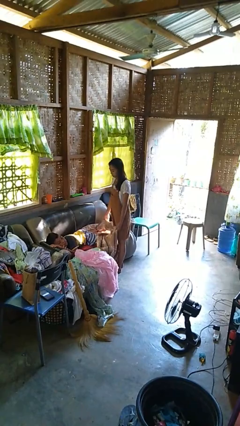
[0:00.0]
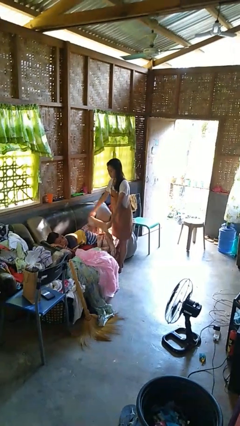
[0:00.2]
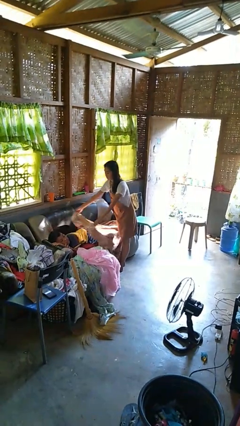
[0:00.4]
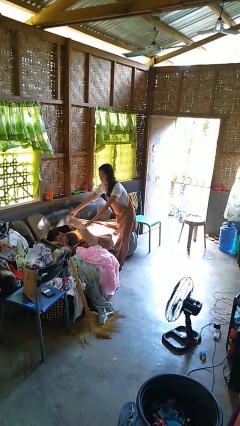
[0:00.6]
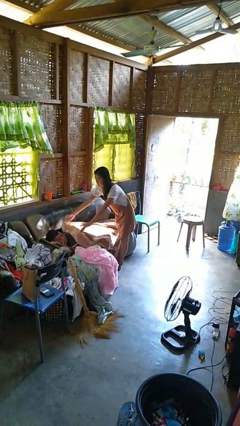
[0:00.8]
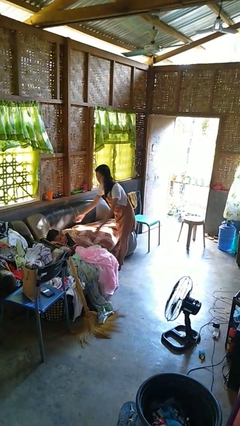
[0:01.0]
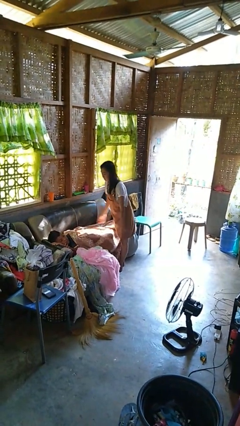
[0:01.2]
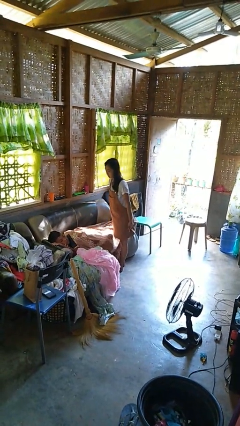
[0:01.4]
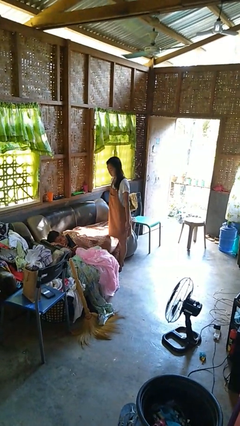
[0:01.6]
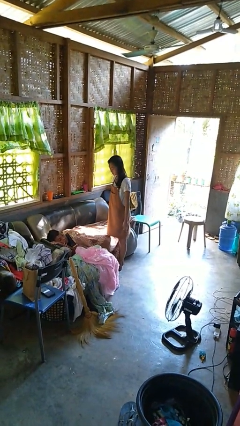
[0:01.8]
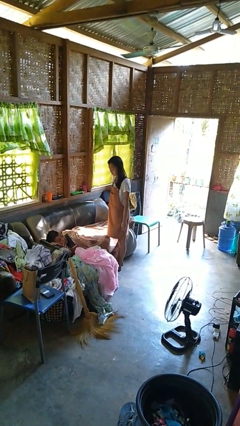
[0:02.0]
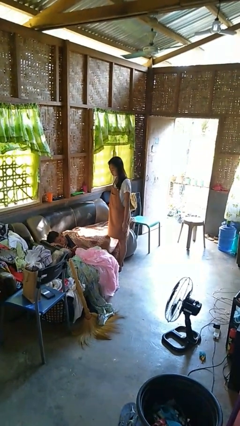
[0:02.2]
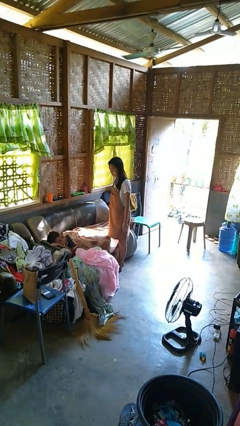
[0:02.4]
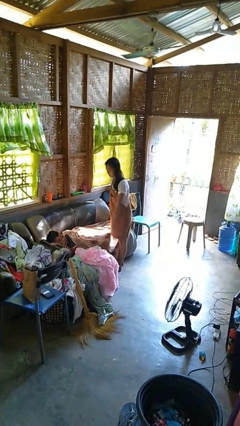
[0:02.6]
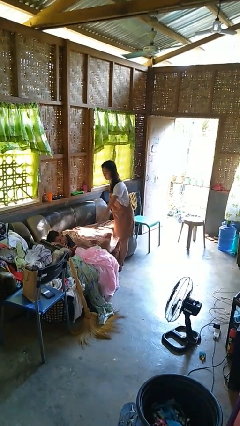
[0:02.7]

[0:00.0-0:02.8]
person covers friend with blanket

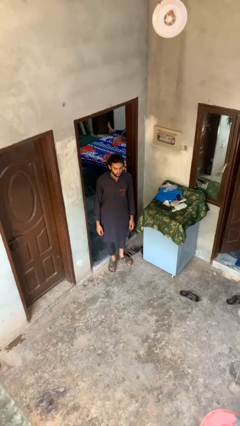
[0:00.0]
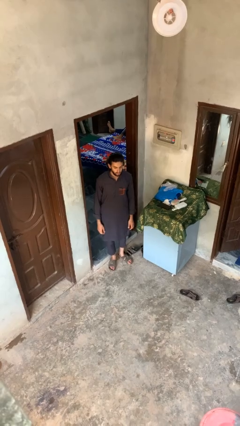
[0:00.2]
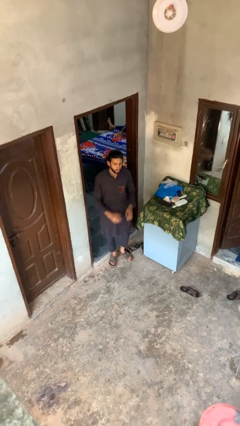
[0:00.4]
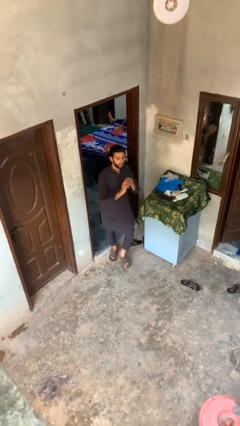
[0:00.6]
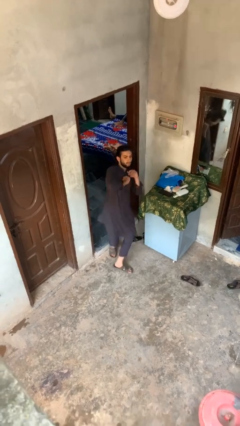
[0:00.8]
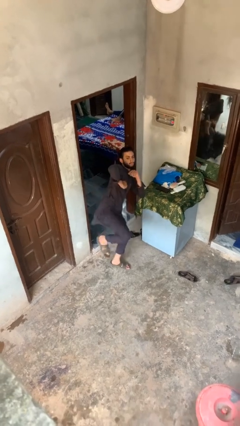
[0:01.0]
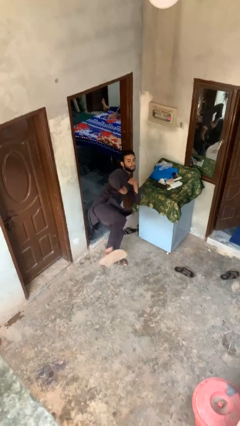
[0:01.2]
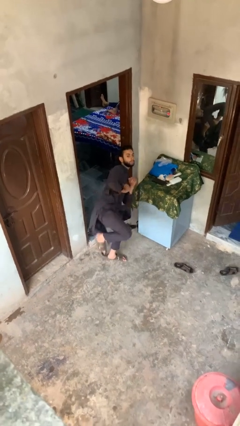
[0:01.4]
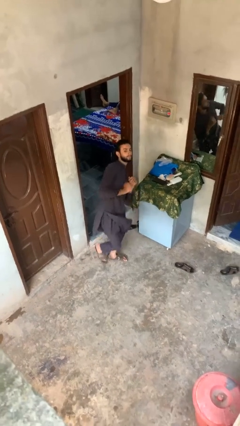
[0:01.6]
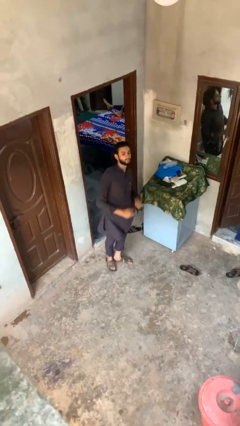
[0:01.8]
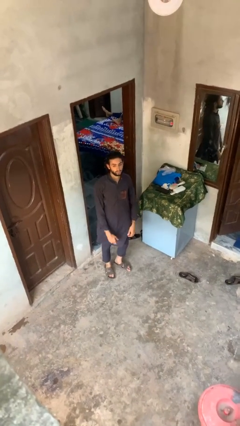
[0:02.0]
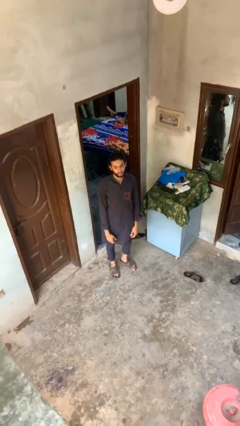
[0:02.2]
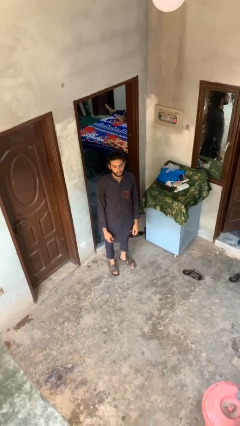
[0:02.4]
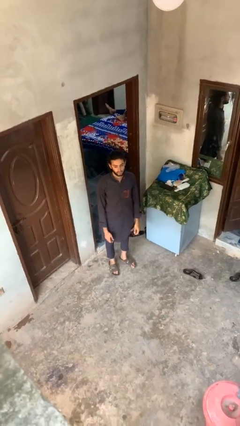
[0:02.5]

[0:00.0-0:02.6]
person karate kicks

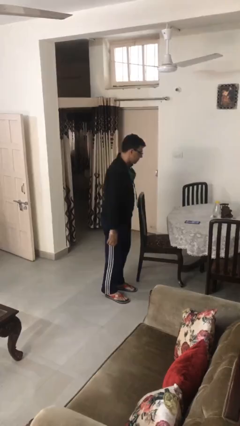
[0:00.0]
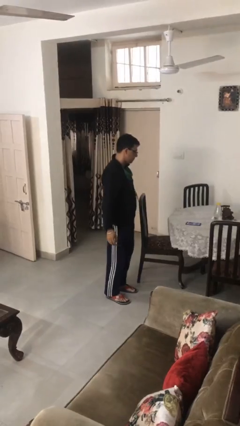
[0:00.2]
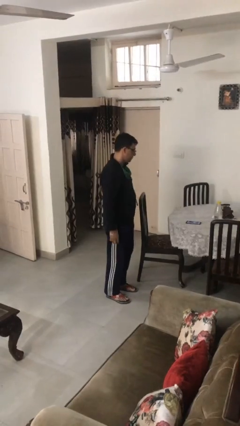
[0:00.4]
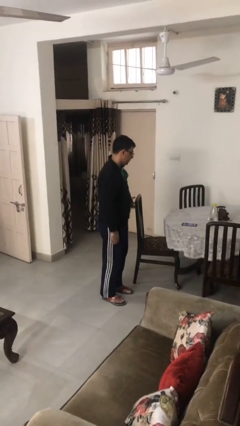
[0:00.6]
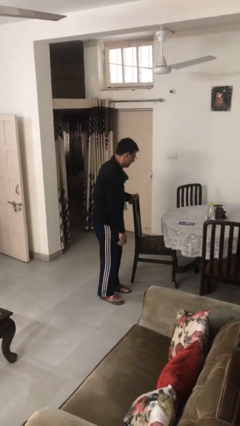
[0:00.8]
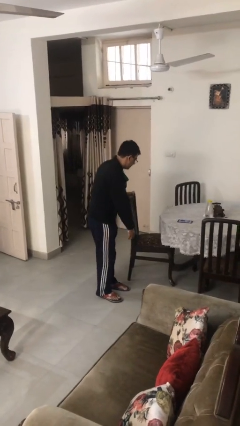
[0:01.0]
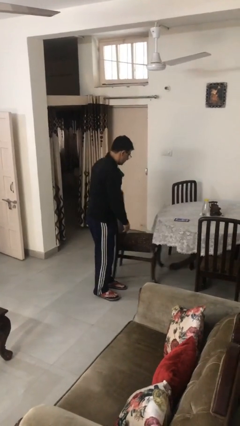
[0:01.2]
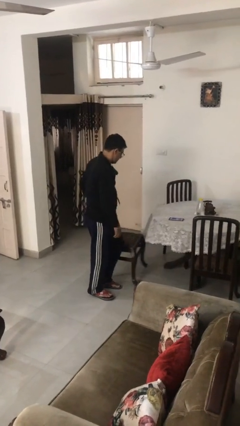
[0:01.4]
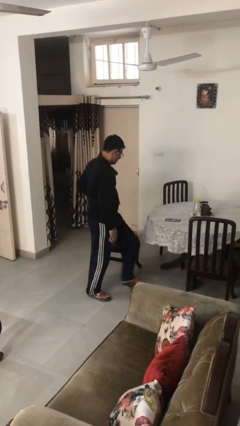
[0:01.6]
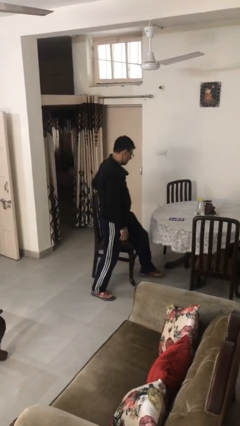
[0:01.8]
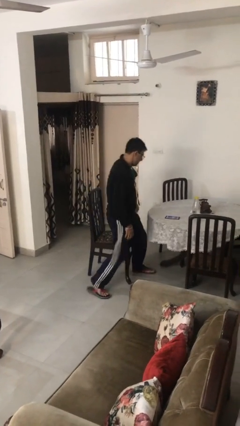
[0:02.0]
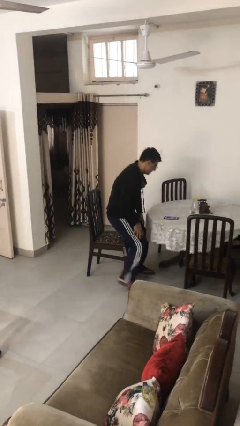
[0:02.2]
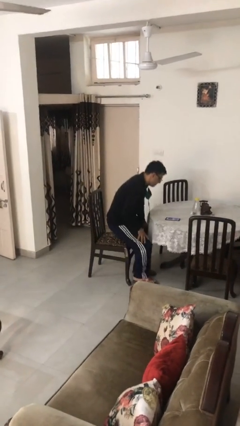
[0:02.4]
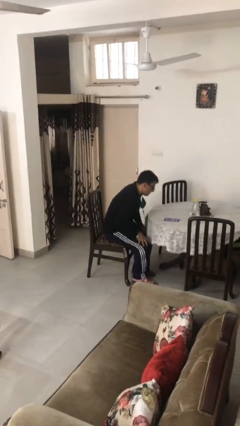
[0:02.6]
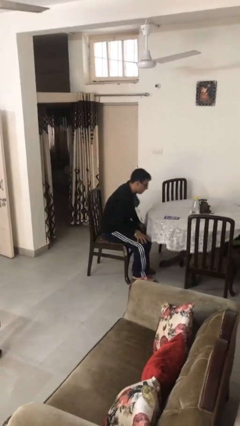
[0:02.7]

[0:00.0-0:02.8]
person sits down

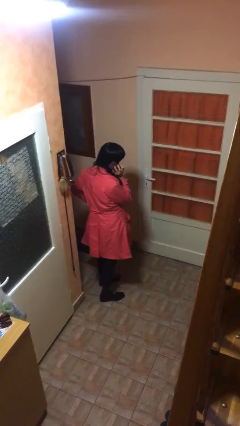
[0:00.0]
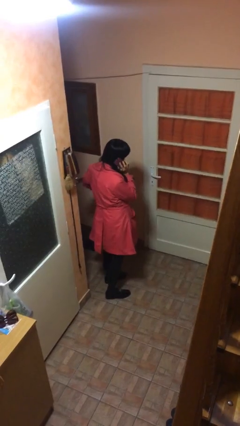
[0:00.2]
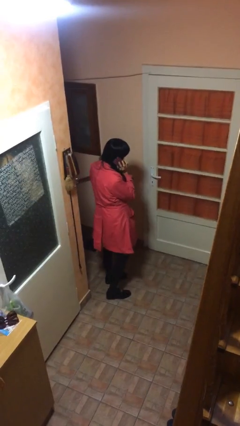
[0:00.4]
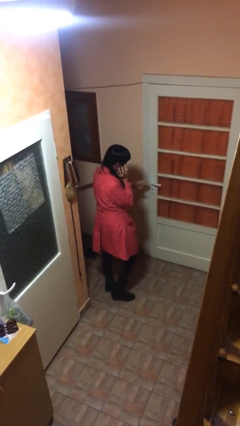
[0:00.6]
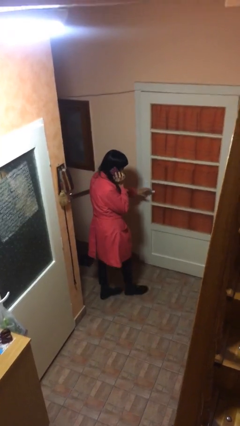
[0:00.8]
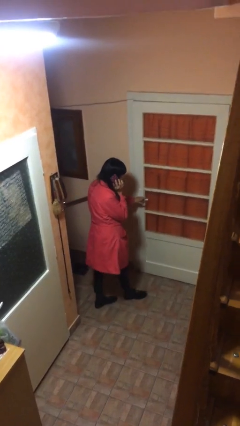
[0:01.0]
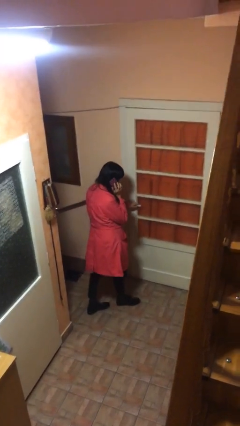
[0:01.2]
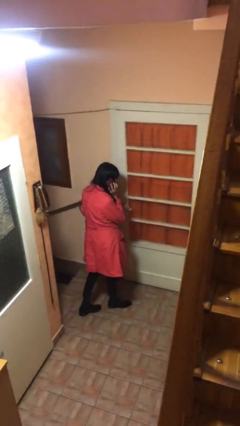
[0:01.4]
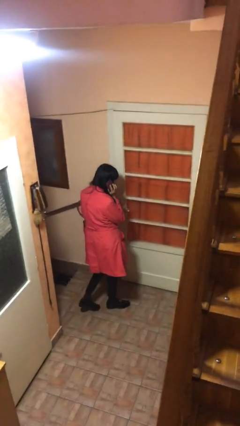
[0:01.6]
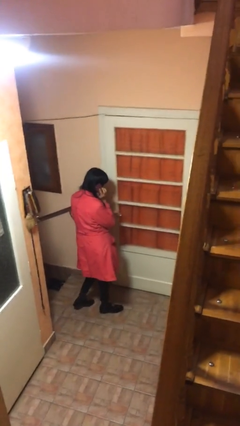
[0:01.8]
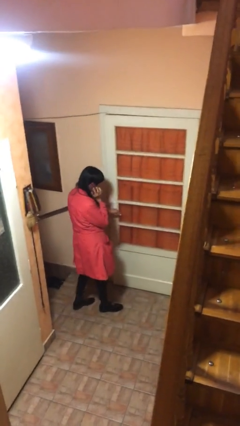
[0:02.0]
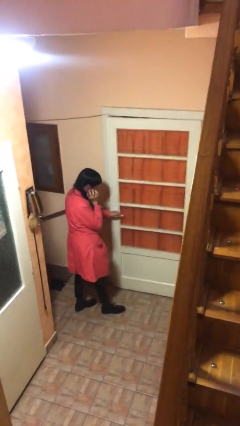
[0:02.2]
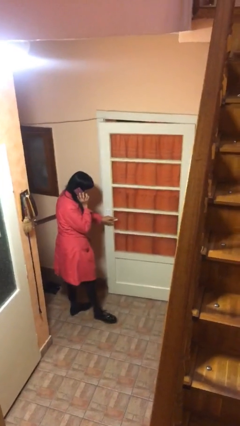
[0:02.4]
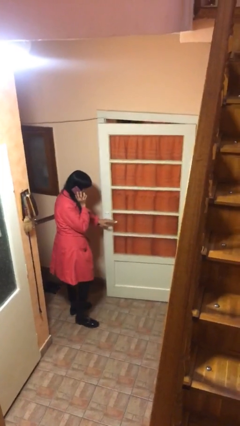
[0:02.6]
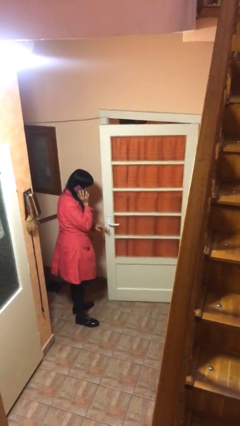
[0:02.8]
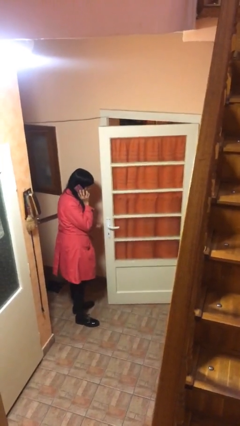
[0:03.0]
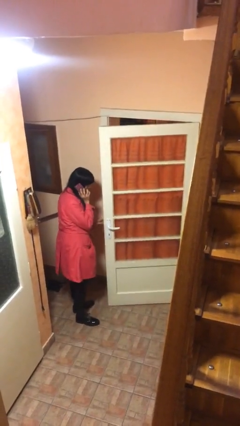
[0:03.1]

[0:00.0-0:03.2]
person opens facility door

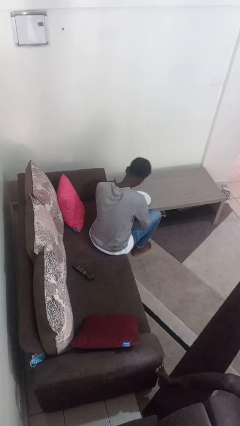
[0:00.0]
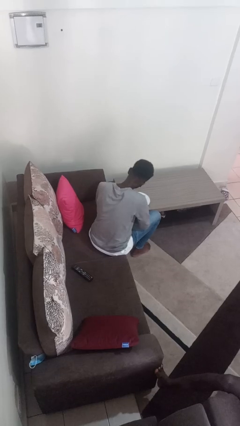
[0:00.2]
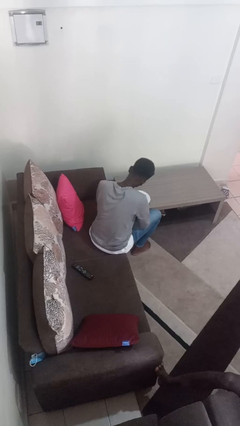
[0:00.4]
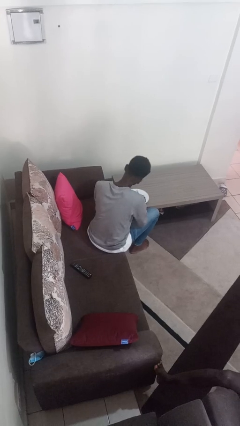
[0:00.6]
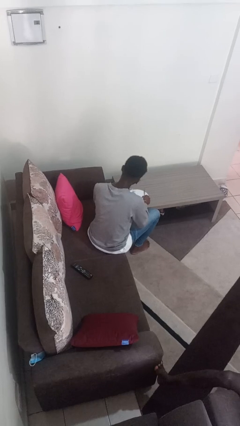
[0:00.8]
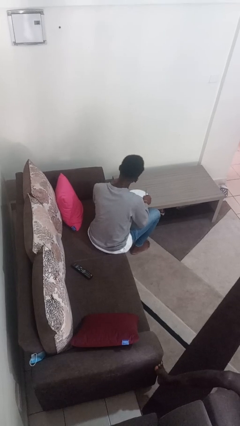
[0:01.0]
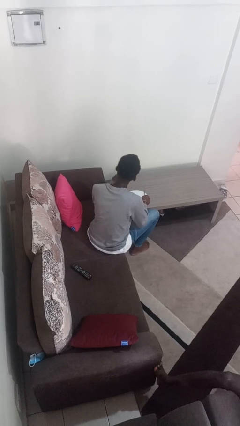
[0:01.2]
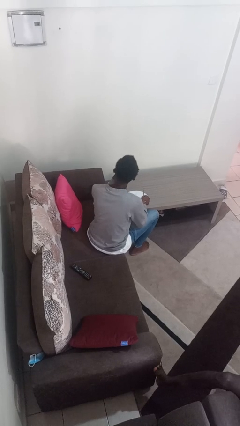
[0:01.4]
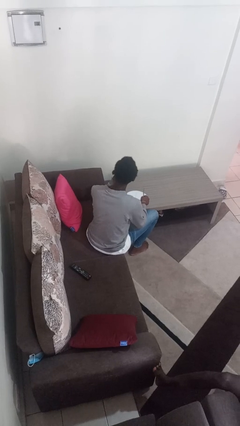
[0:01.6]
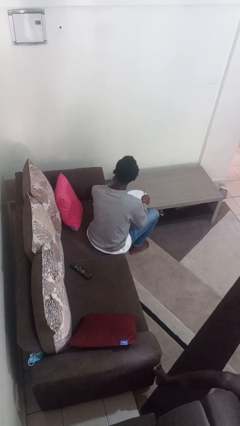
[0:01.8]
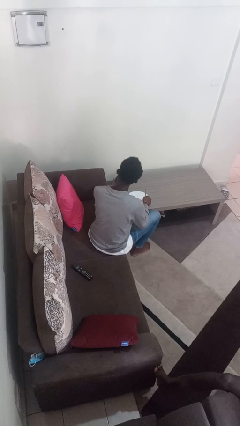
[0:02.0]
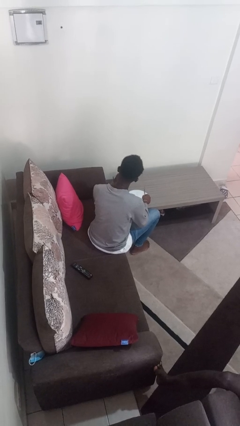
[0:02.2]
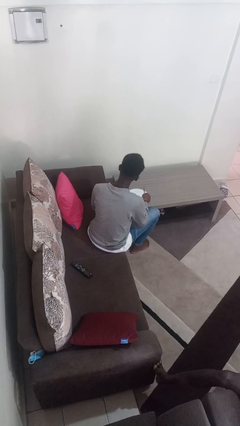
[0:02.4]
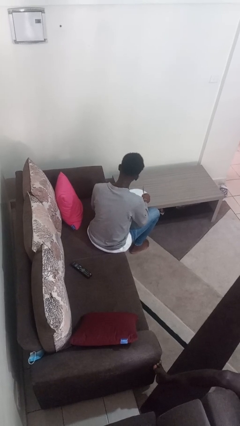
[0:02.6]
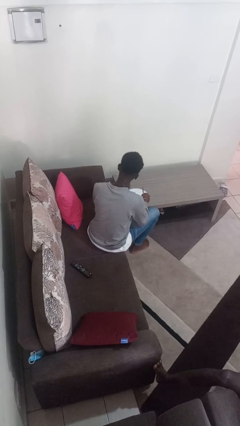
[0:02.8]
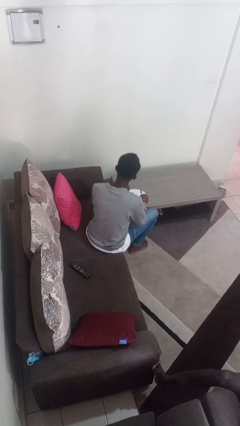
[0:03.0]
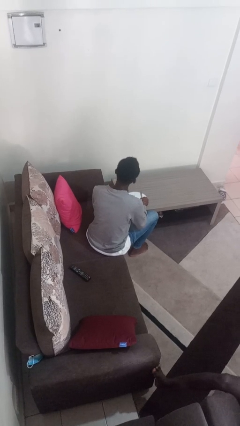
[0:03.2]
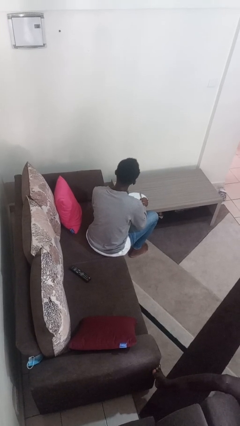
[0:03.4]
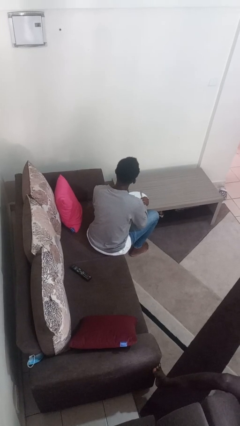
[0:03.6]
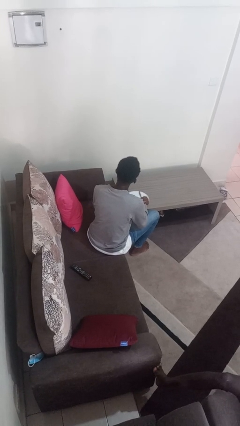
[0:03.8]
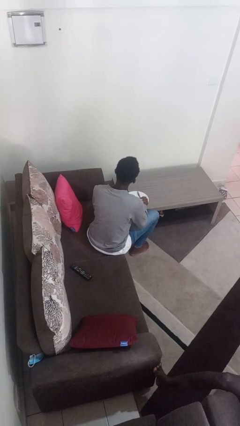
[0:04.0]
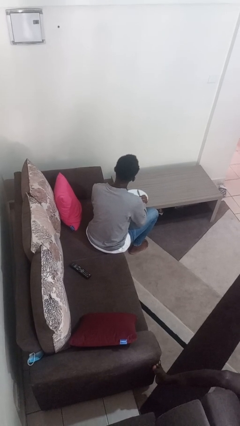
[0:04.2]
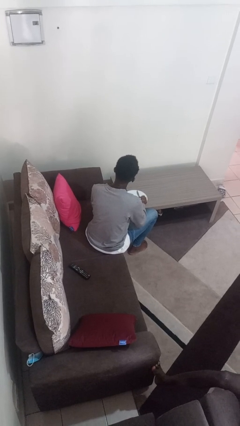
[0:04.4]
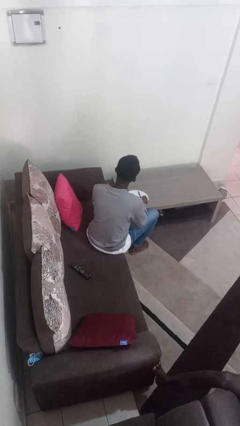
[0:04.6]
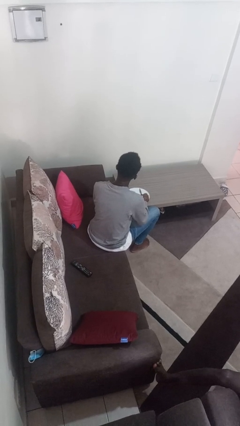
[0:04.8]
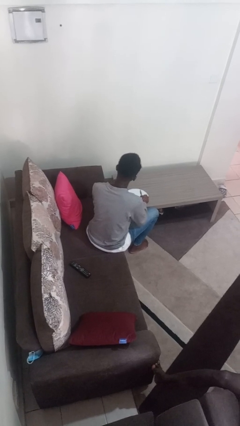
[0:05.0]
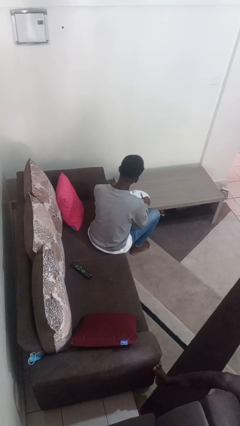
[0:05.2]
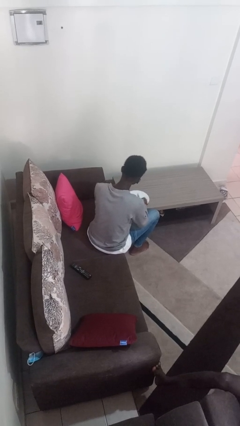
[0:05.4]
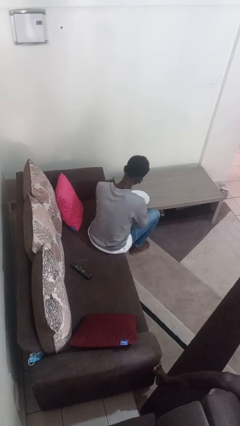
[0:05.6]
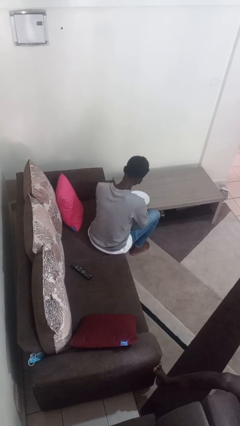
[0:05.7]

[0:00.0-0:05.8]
person eats with utensil

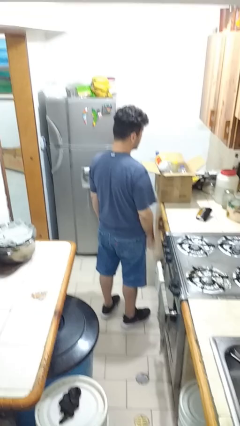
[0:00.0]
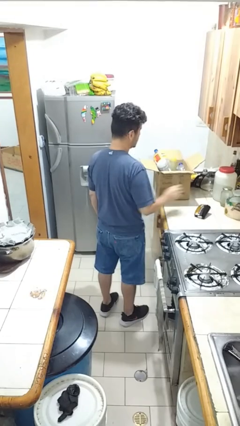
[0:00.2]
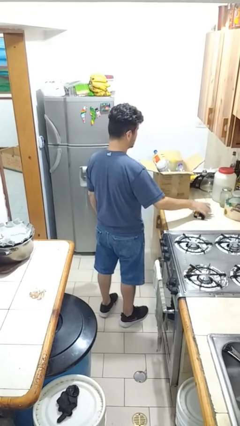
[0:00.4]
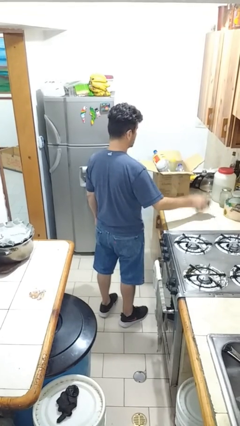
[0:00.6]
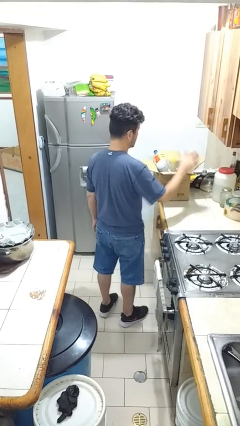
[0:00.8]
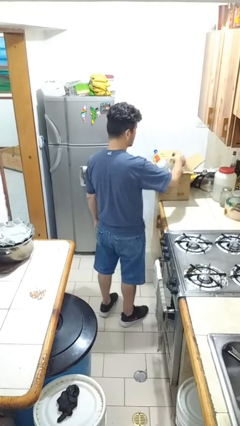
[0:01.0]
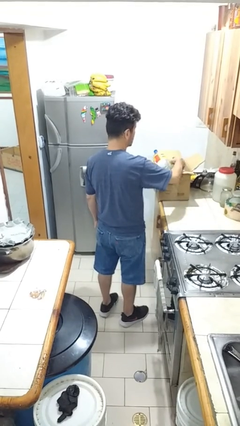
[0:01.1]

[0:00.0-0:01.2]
person puts object into box
